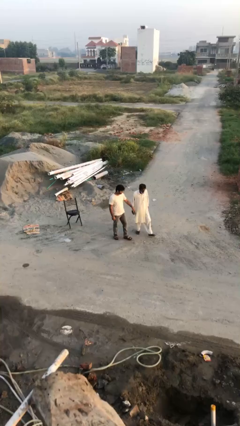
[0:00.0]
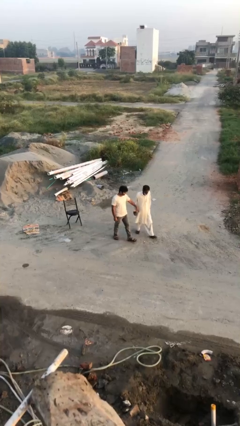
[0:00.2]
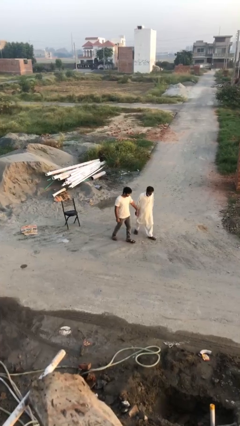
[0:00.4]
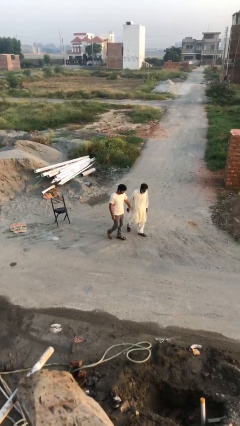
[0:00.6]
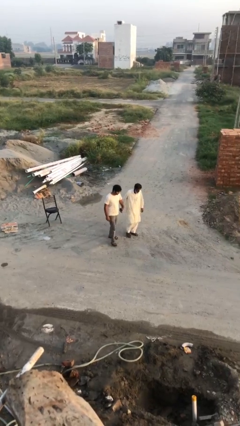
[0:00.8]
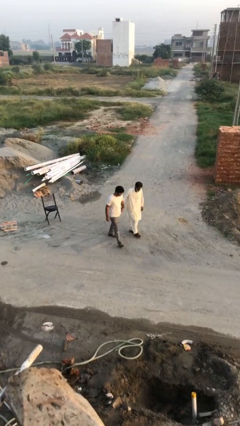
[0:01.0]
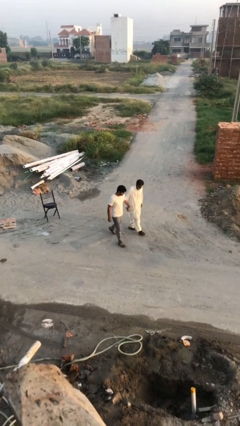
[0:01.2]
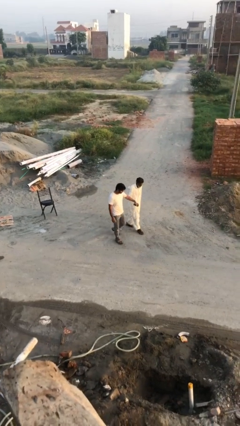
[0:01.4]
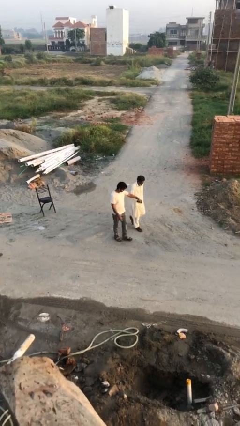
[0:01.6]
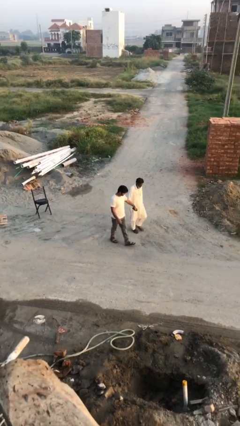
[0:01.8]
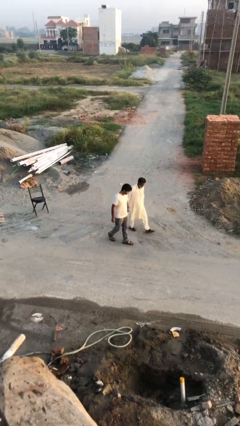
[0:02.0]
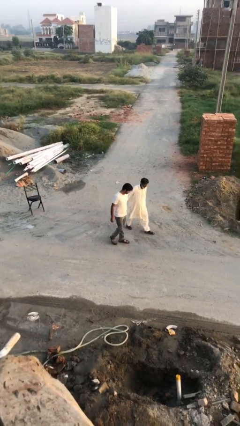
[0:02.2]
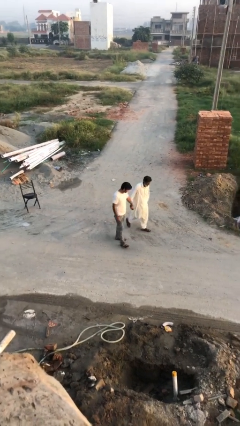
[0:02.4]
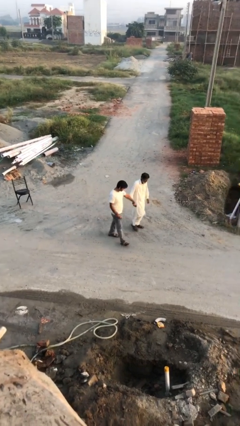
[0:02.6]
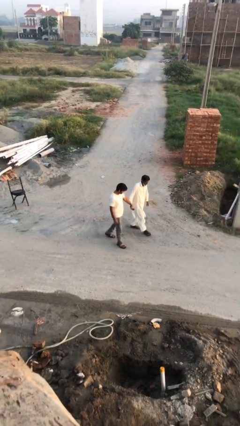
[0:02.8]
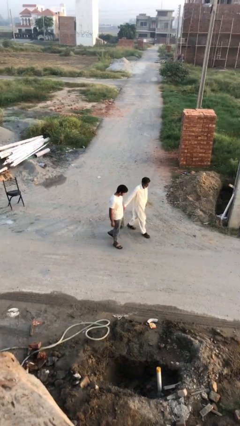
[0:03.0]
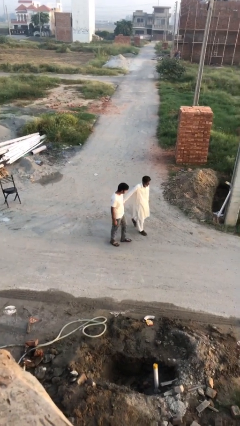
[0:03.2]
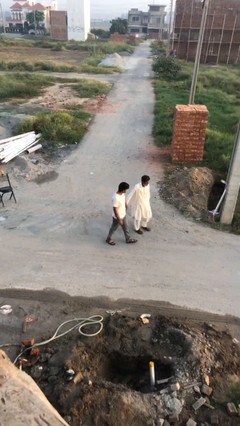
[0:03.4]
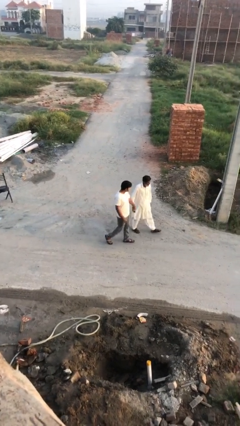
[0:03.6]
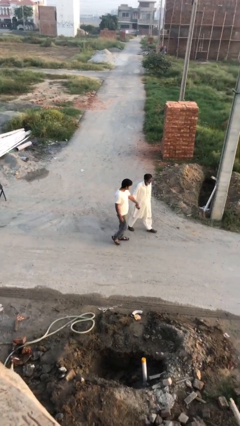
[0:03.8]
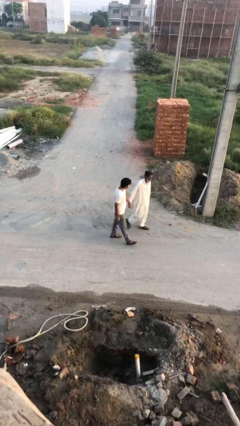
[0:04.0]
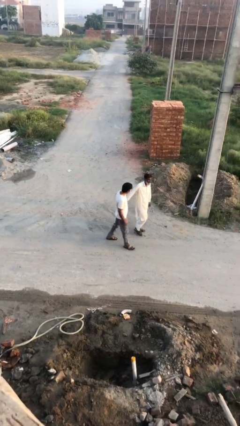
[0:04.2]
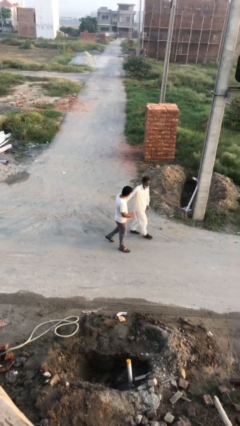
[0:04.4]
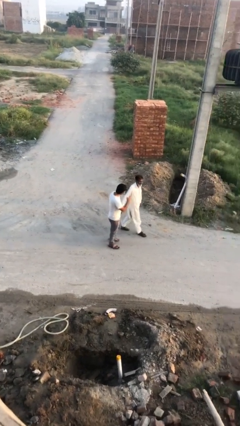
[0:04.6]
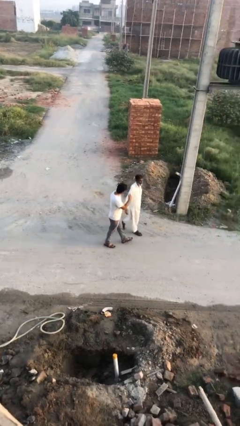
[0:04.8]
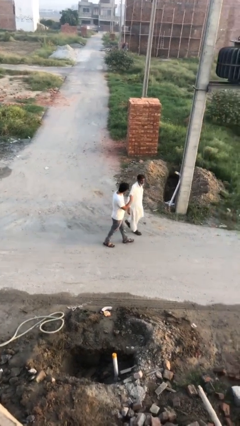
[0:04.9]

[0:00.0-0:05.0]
person holds hand

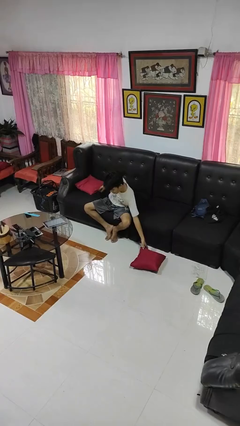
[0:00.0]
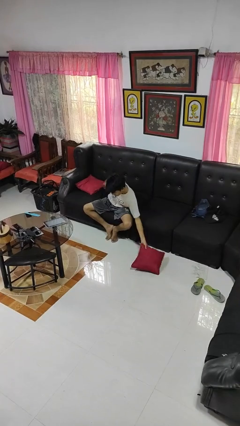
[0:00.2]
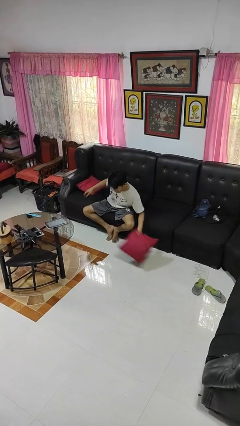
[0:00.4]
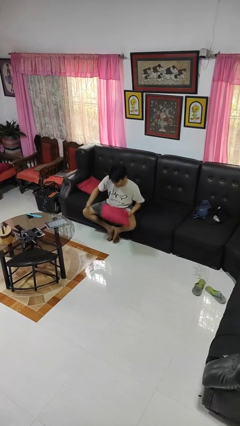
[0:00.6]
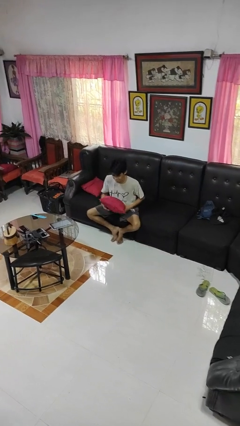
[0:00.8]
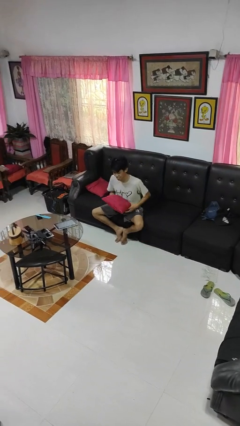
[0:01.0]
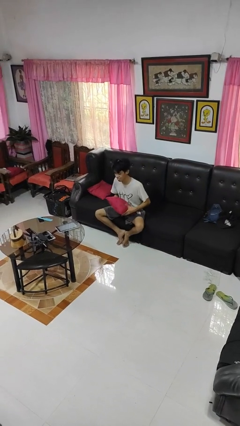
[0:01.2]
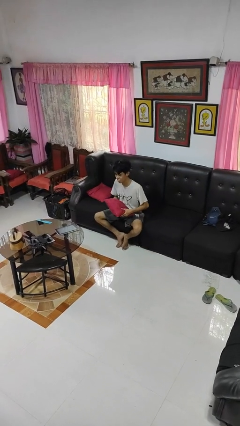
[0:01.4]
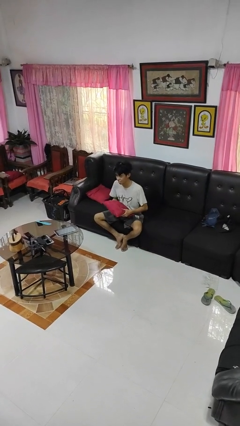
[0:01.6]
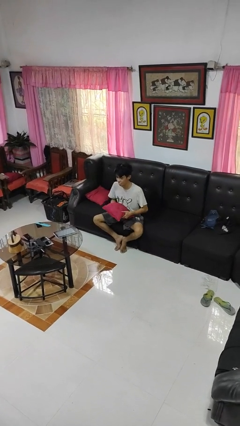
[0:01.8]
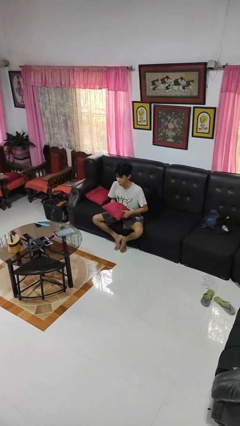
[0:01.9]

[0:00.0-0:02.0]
person picks up object from floor

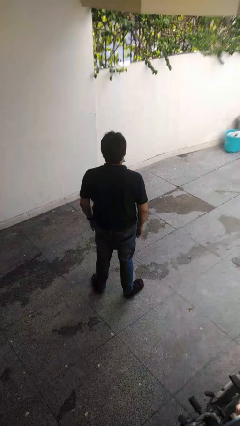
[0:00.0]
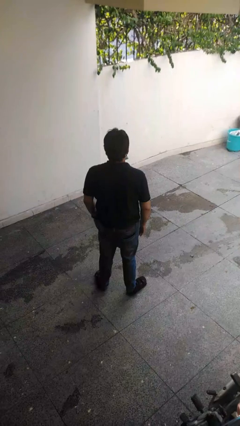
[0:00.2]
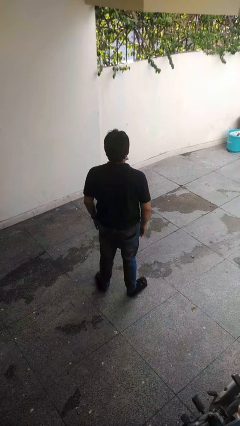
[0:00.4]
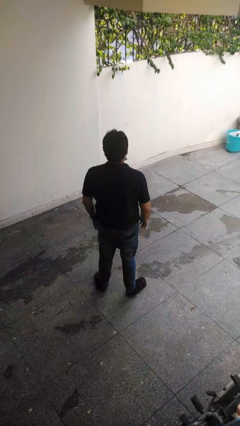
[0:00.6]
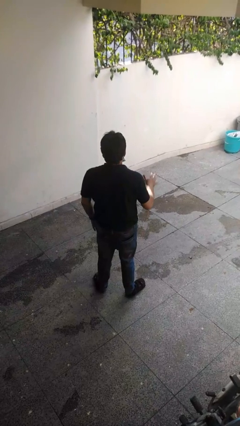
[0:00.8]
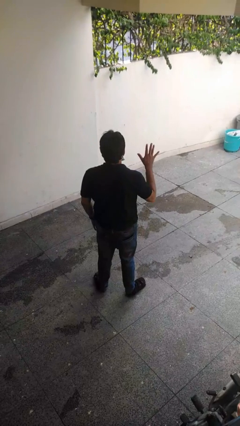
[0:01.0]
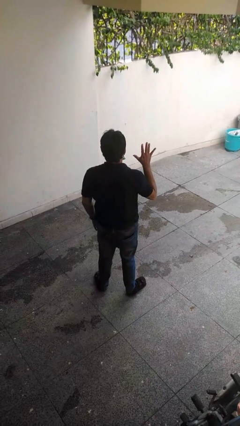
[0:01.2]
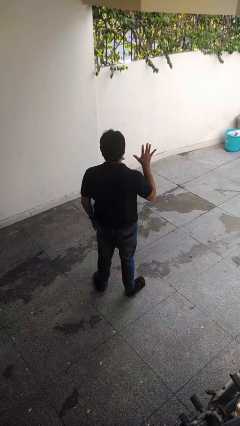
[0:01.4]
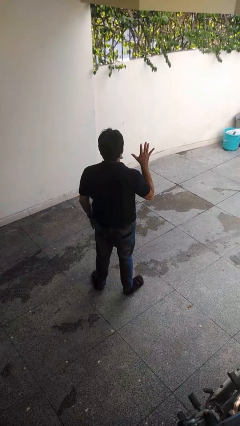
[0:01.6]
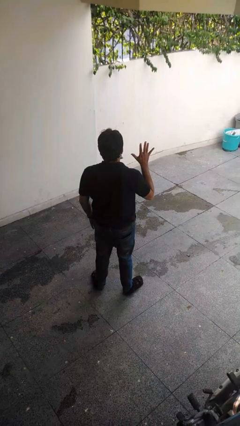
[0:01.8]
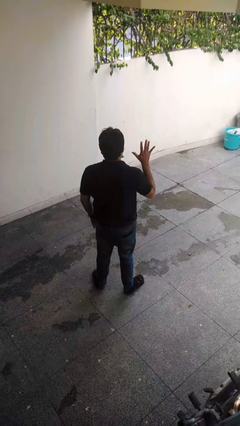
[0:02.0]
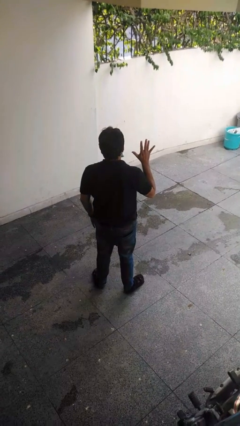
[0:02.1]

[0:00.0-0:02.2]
person gestures number five

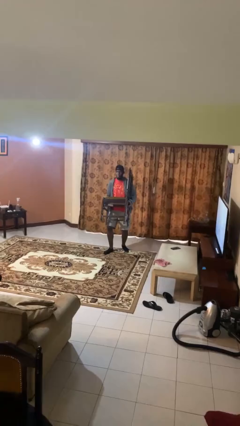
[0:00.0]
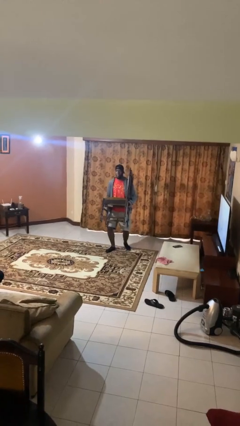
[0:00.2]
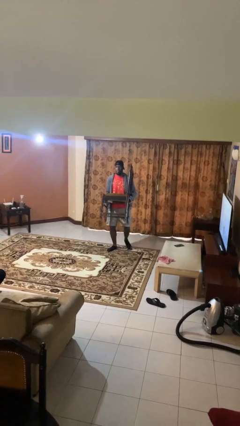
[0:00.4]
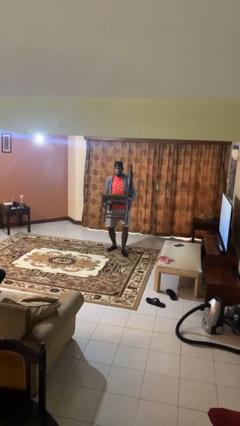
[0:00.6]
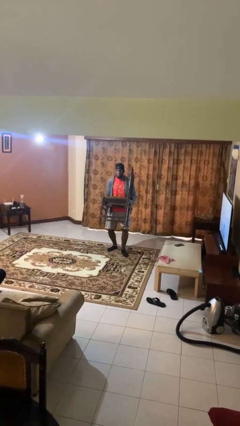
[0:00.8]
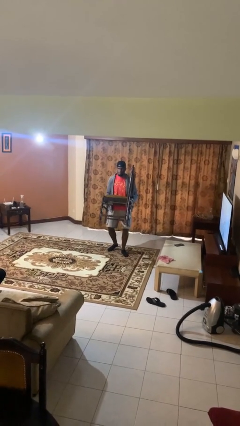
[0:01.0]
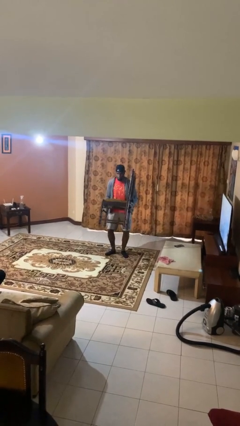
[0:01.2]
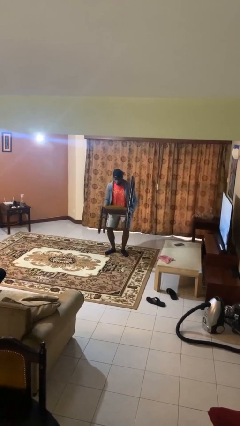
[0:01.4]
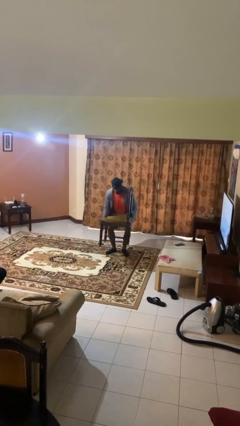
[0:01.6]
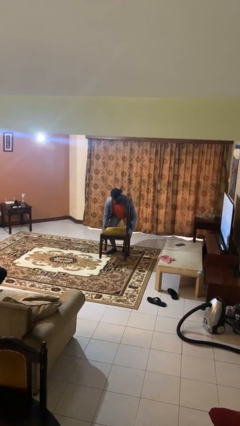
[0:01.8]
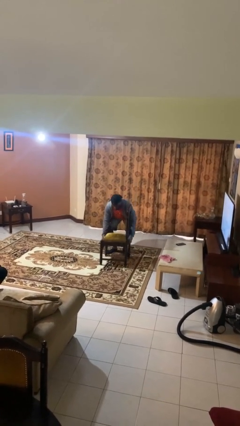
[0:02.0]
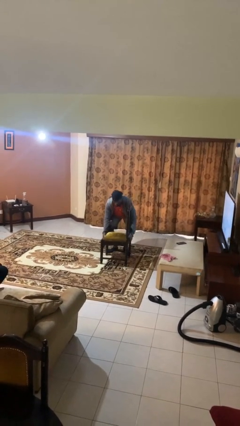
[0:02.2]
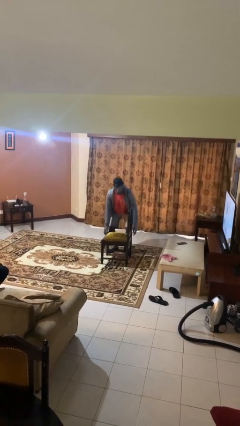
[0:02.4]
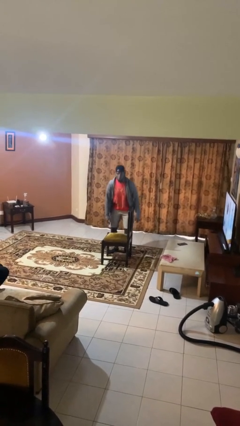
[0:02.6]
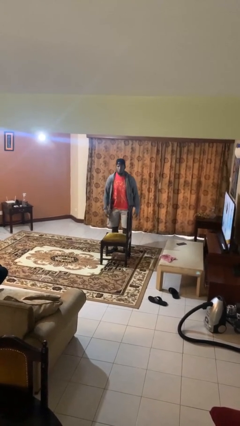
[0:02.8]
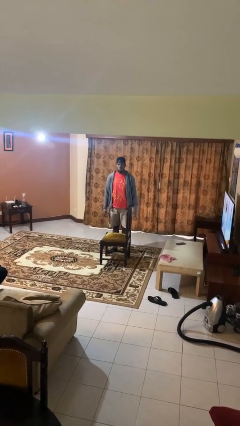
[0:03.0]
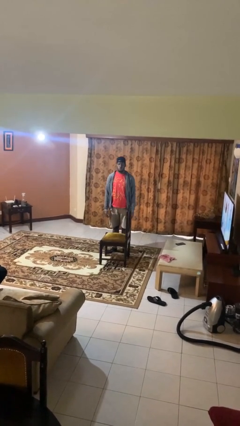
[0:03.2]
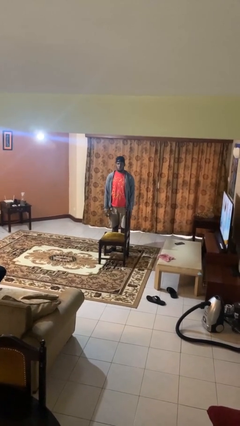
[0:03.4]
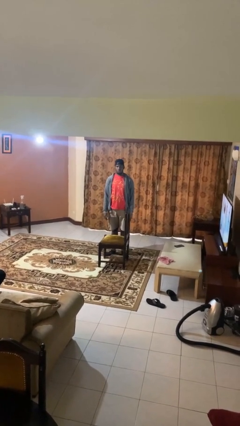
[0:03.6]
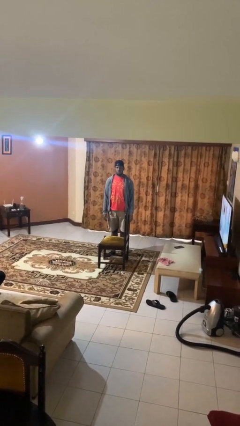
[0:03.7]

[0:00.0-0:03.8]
person puts down object on floor

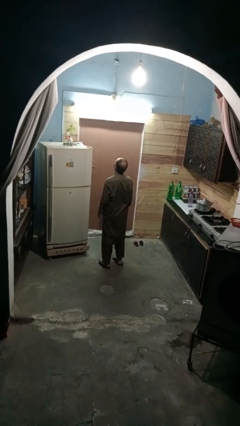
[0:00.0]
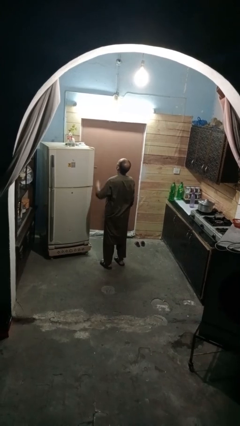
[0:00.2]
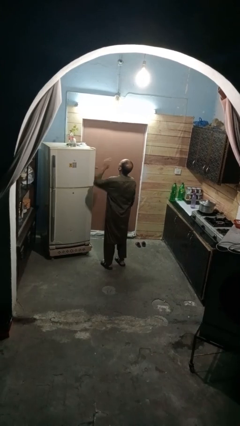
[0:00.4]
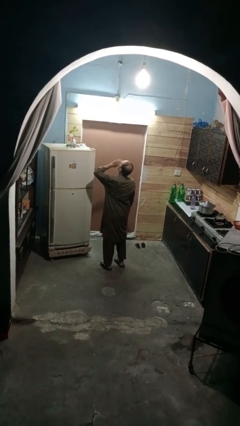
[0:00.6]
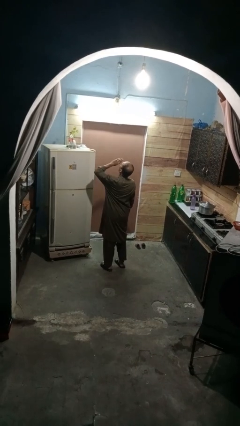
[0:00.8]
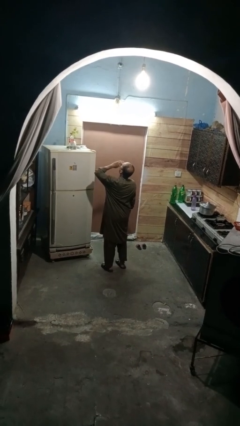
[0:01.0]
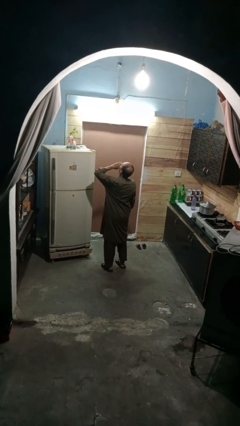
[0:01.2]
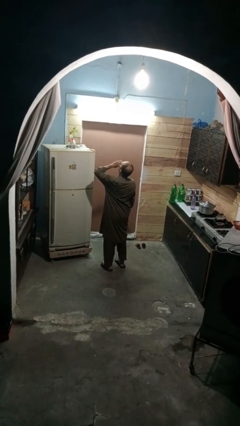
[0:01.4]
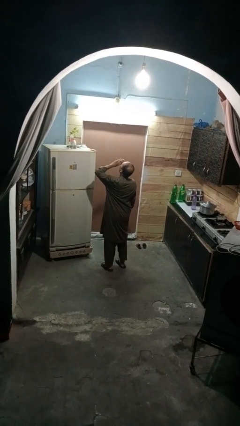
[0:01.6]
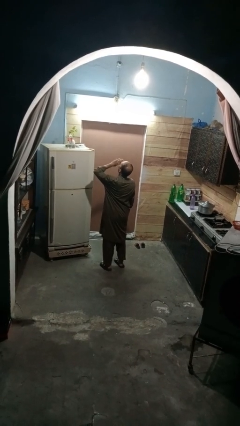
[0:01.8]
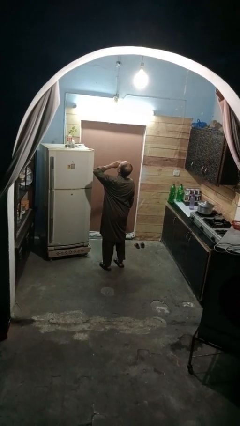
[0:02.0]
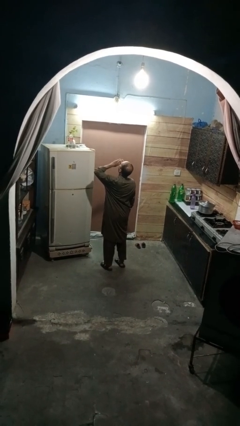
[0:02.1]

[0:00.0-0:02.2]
person yawns

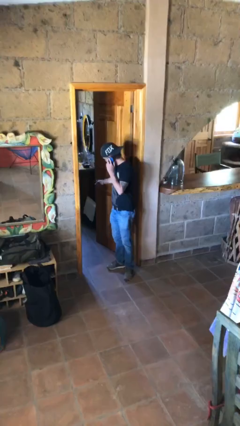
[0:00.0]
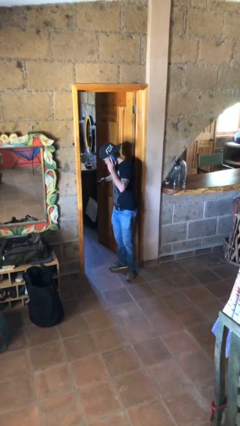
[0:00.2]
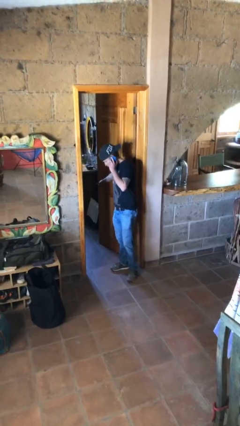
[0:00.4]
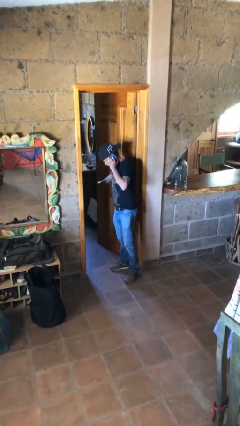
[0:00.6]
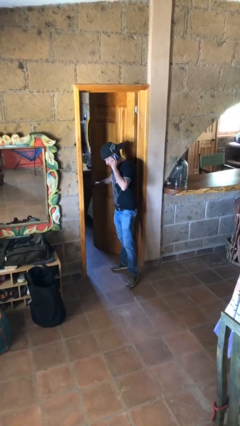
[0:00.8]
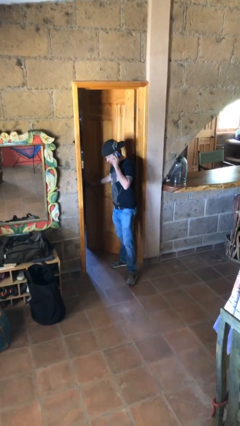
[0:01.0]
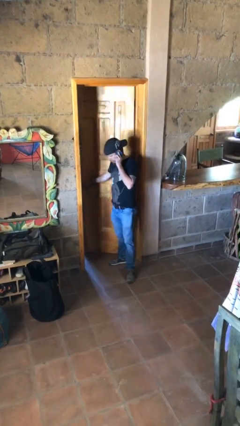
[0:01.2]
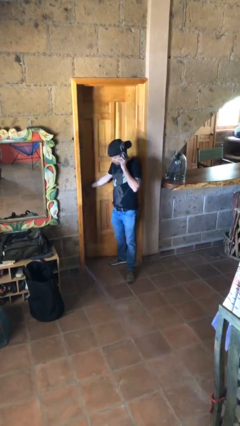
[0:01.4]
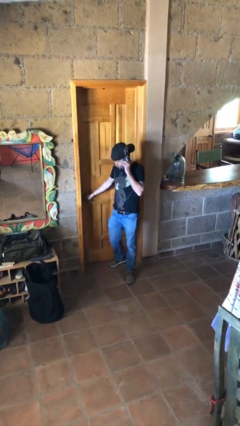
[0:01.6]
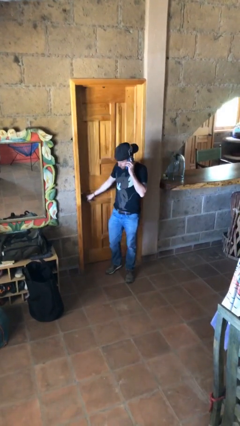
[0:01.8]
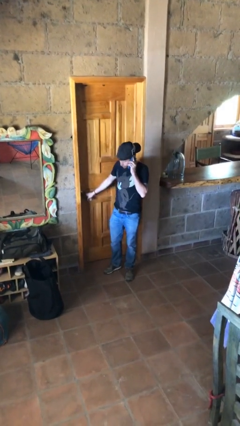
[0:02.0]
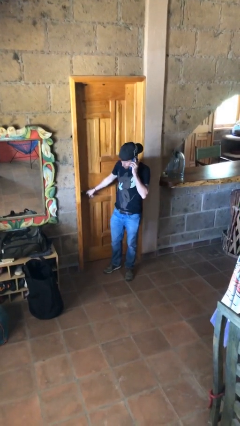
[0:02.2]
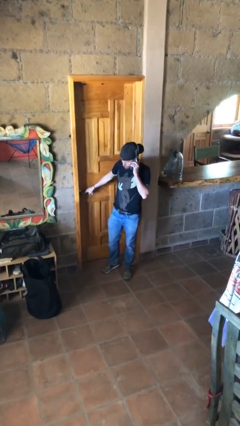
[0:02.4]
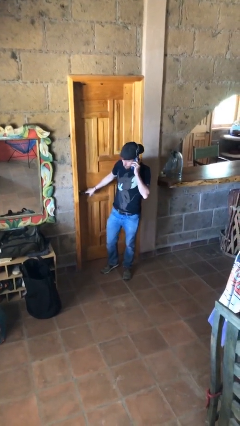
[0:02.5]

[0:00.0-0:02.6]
person closes facility door
